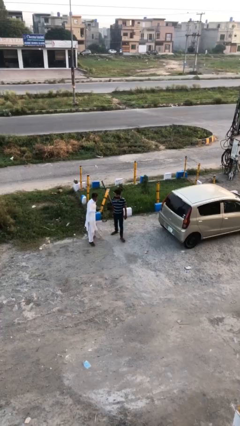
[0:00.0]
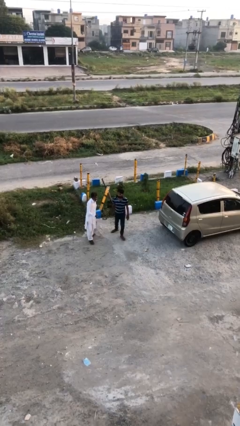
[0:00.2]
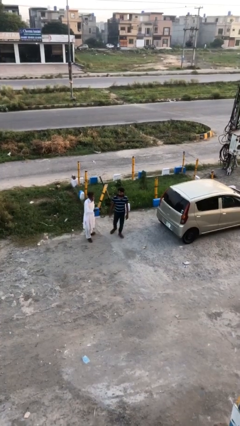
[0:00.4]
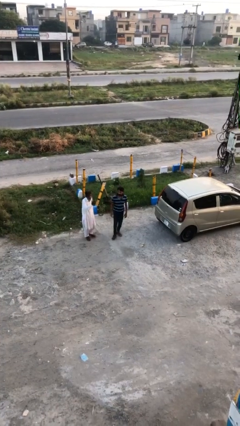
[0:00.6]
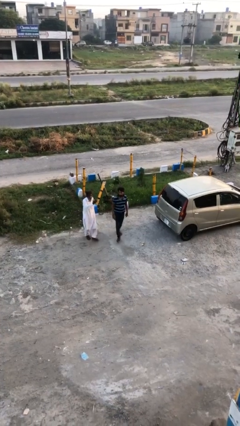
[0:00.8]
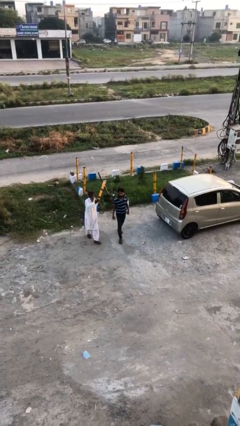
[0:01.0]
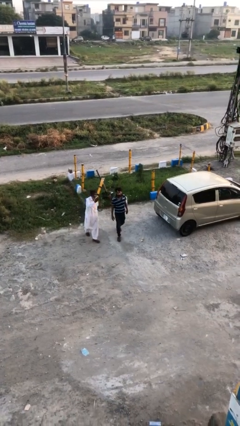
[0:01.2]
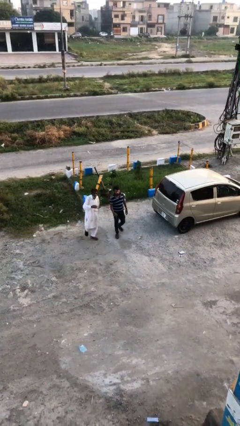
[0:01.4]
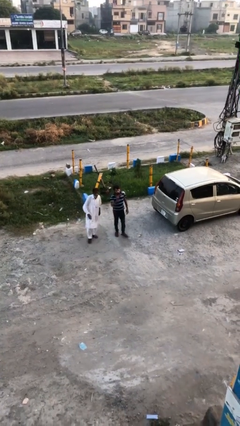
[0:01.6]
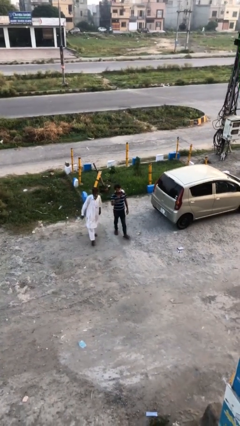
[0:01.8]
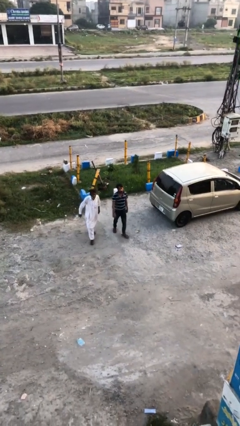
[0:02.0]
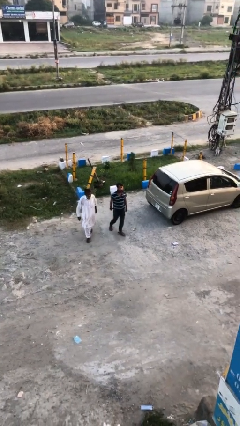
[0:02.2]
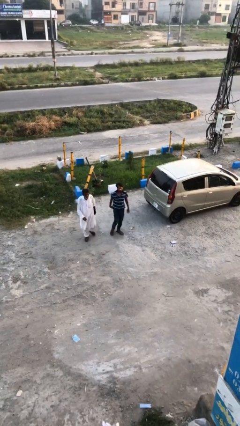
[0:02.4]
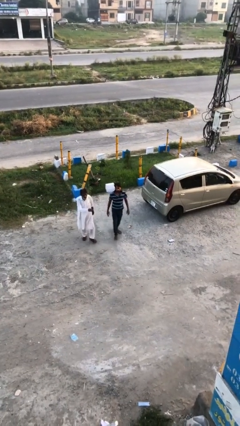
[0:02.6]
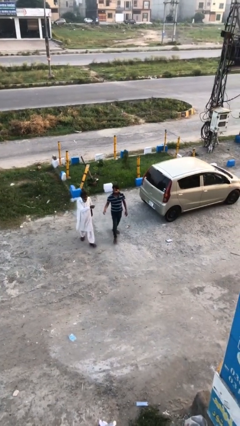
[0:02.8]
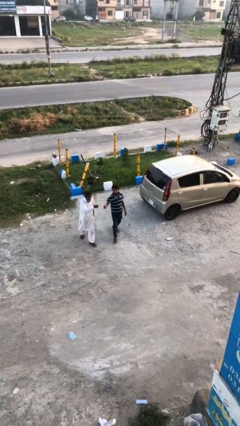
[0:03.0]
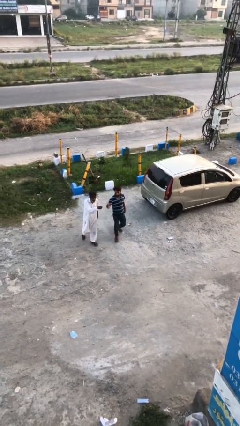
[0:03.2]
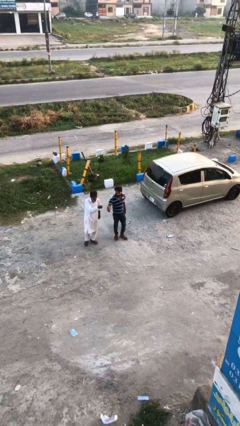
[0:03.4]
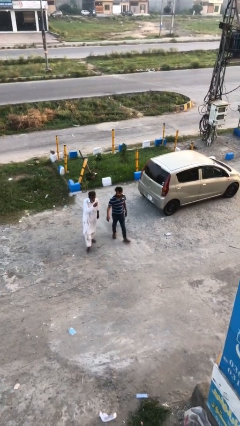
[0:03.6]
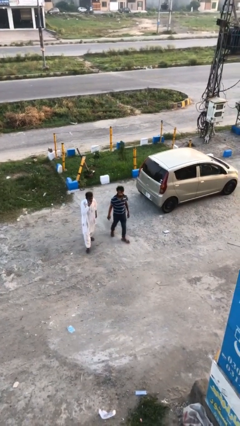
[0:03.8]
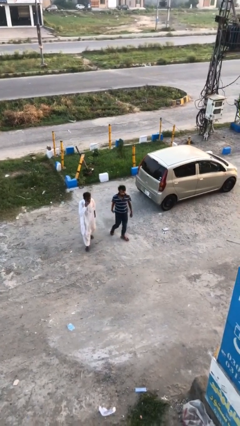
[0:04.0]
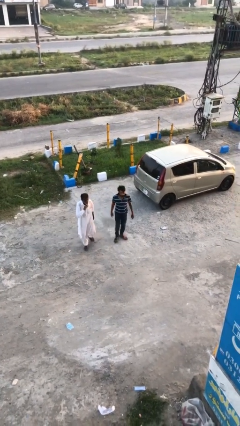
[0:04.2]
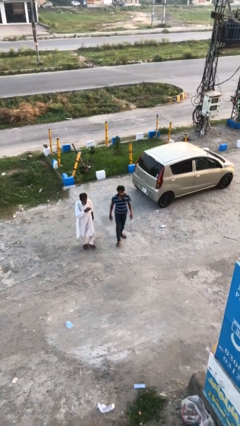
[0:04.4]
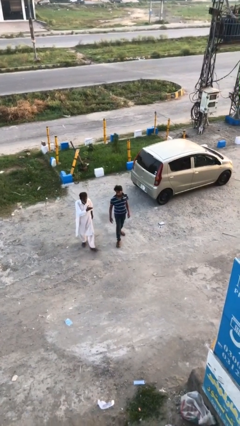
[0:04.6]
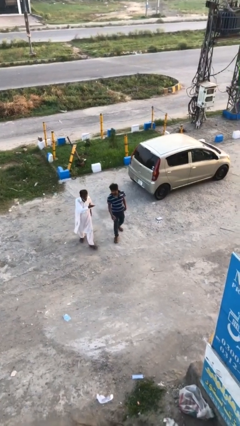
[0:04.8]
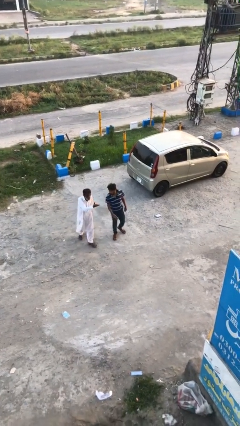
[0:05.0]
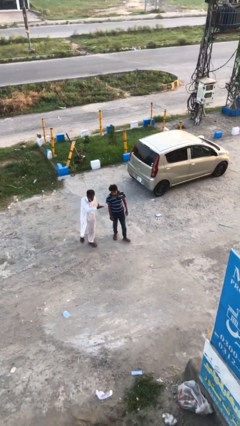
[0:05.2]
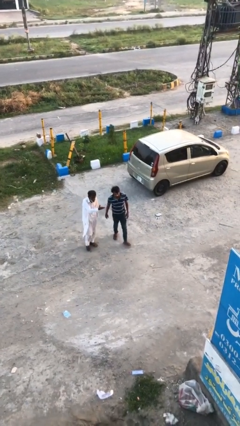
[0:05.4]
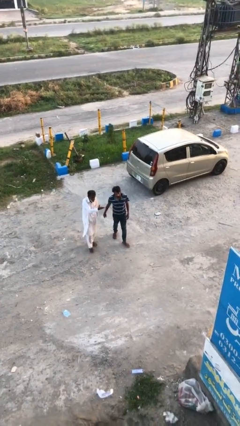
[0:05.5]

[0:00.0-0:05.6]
person talks to person

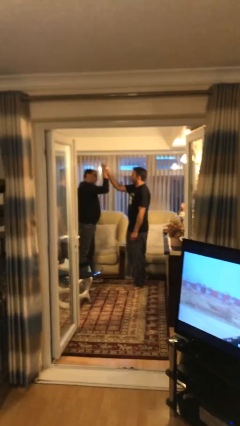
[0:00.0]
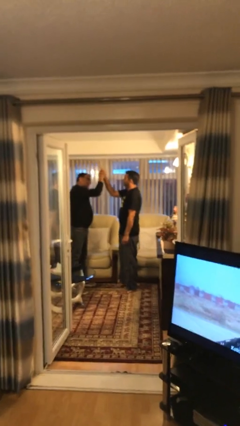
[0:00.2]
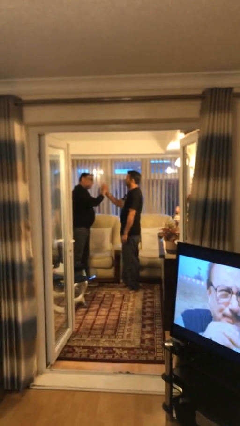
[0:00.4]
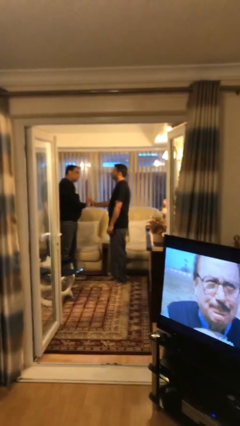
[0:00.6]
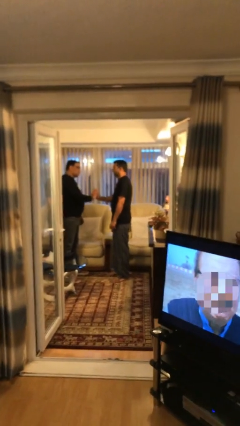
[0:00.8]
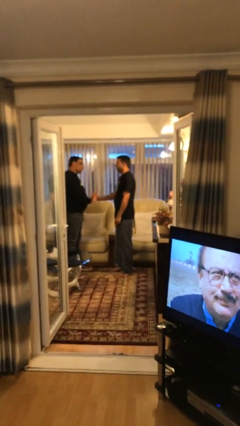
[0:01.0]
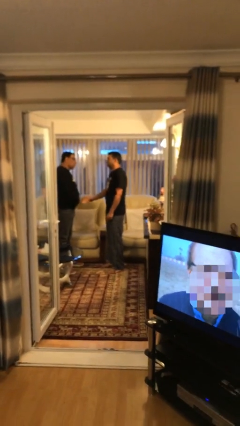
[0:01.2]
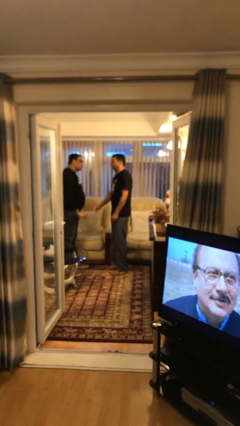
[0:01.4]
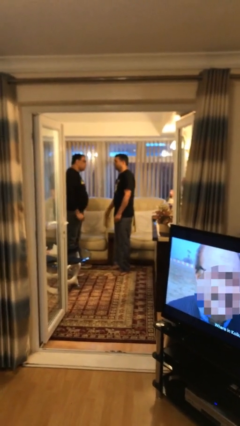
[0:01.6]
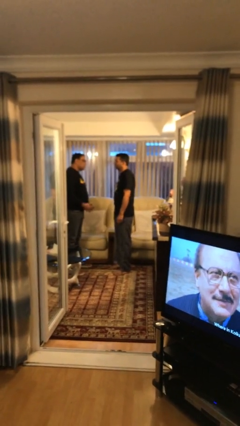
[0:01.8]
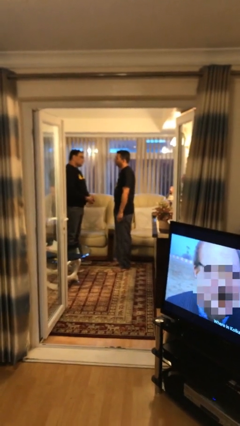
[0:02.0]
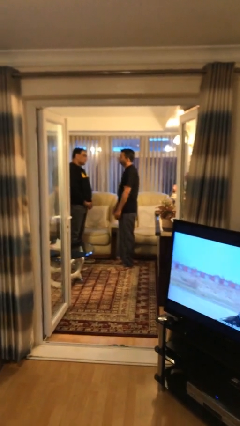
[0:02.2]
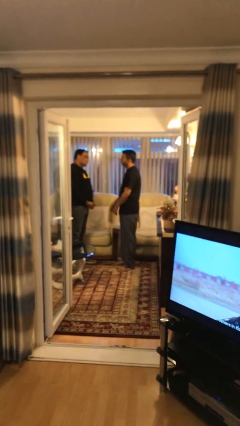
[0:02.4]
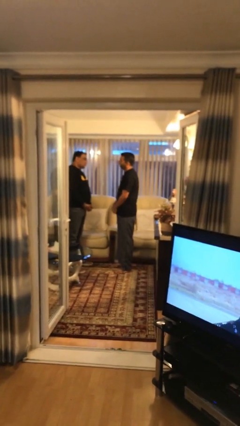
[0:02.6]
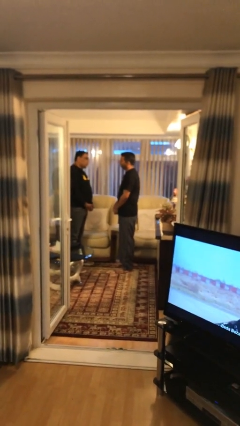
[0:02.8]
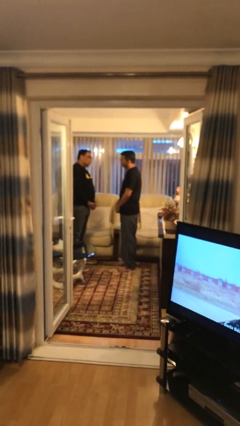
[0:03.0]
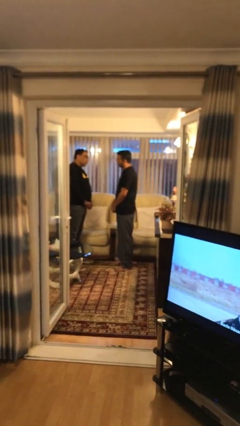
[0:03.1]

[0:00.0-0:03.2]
person highfives hand

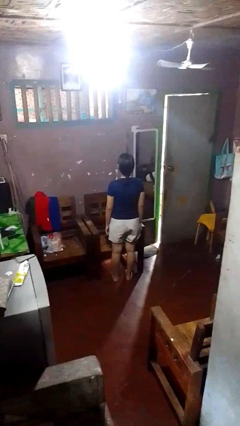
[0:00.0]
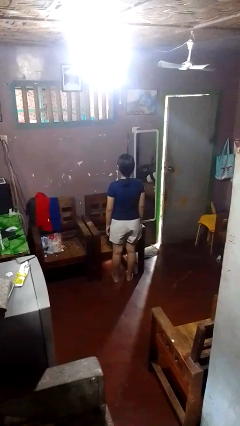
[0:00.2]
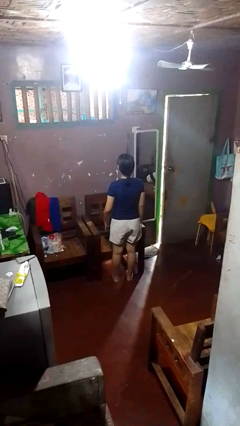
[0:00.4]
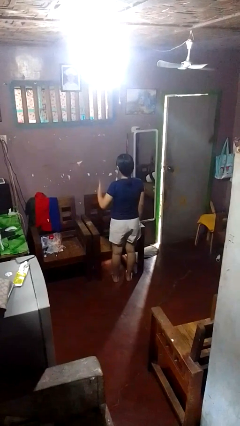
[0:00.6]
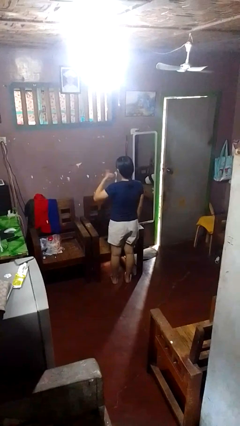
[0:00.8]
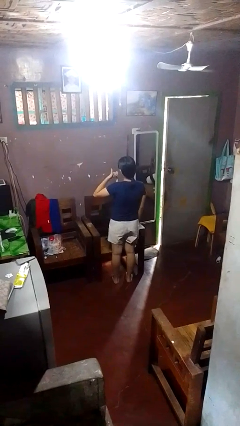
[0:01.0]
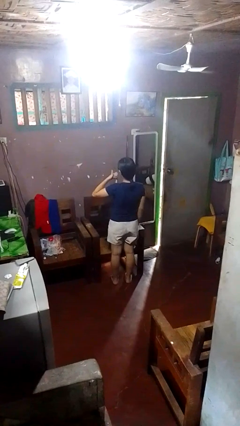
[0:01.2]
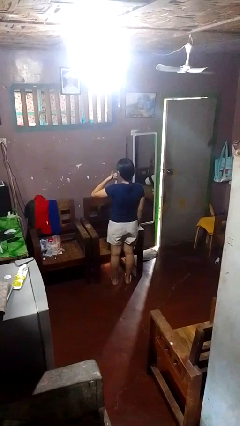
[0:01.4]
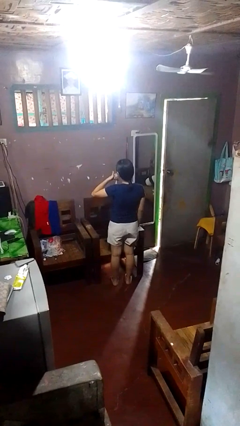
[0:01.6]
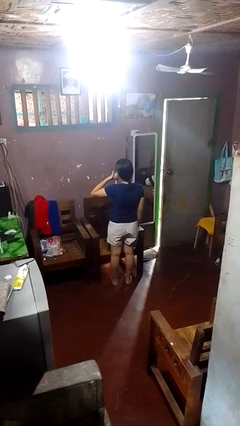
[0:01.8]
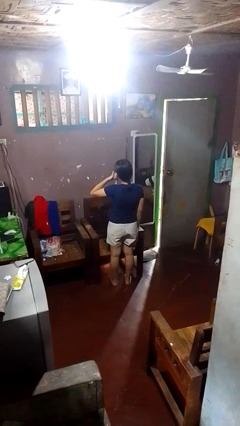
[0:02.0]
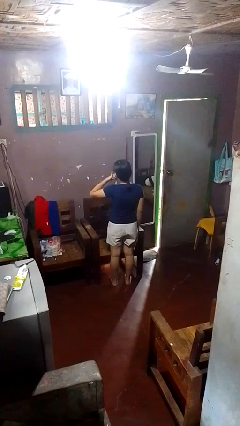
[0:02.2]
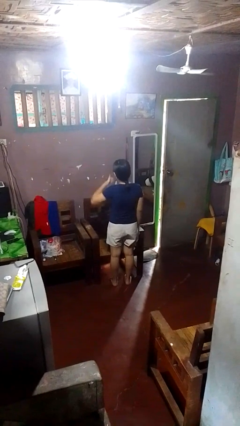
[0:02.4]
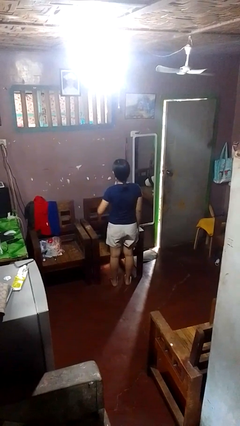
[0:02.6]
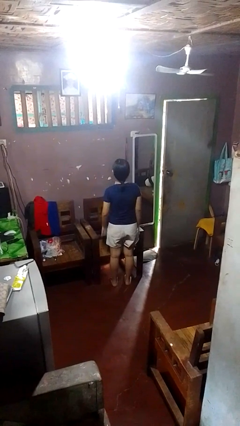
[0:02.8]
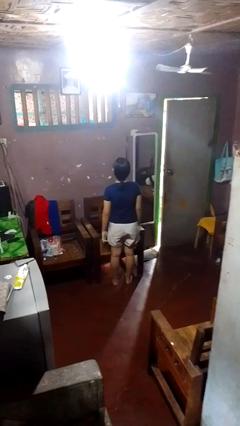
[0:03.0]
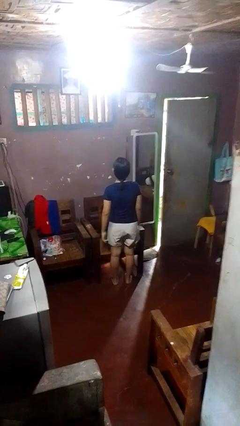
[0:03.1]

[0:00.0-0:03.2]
person gestures call me

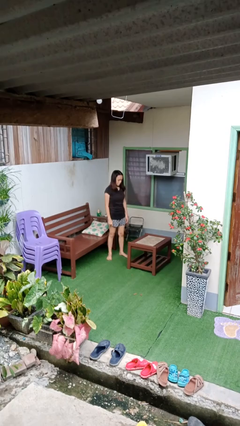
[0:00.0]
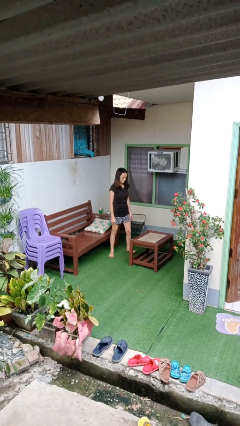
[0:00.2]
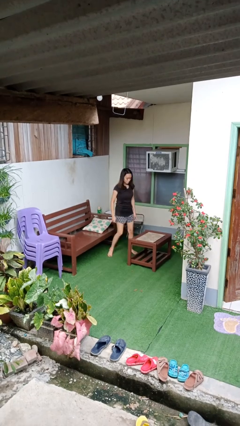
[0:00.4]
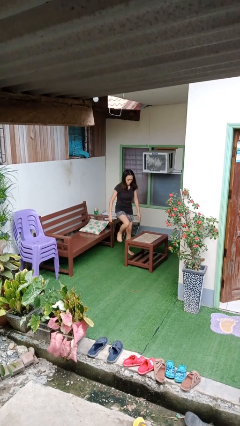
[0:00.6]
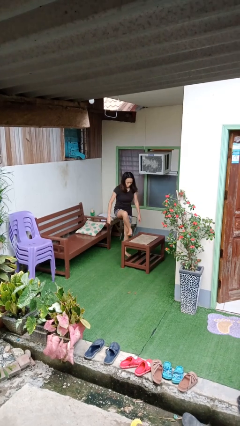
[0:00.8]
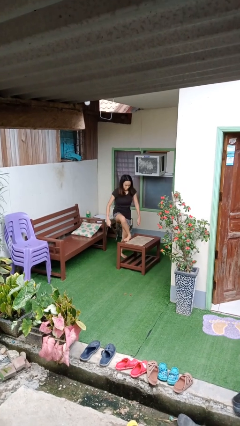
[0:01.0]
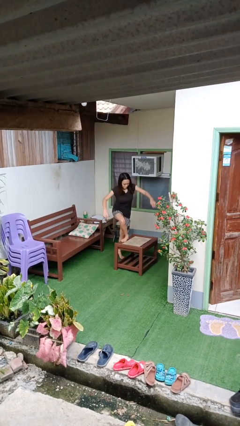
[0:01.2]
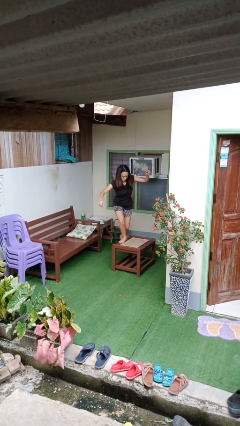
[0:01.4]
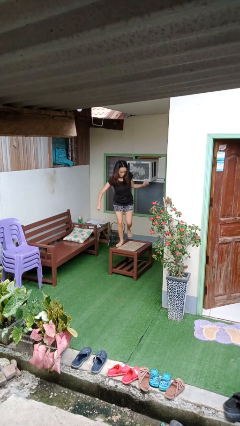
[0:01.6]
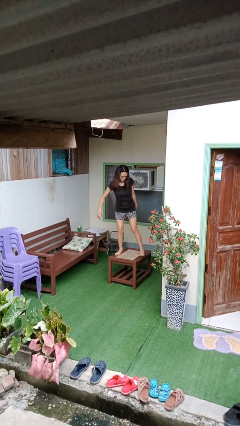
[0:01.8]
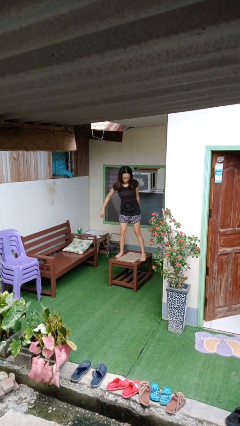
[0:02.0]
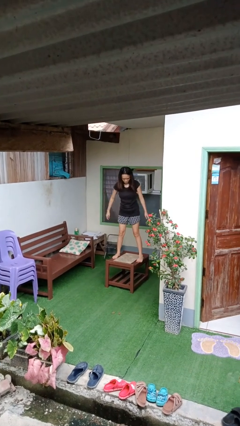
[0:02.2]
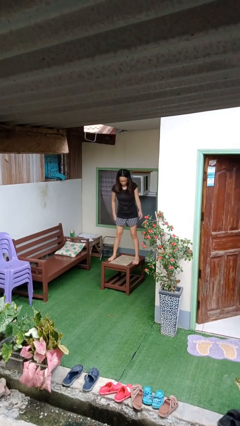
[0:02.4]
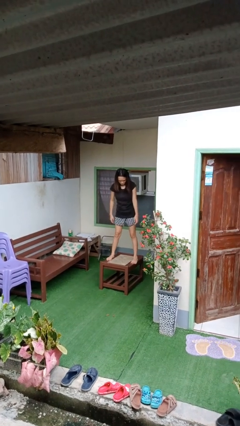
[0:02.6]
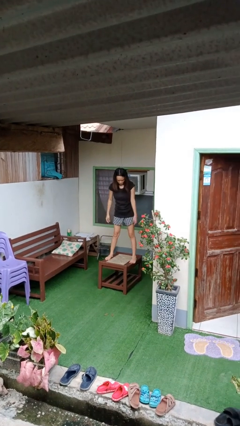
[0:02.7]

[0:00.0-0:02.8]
person climbs on table

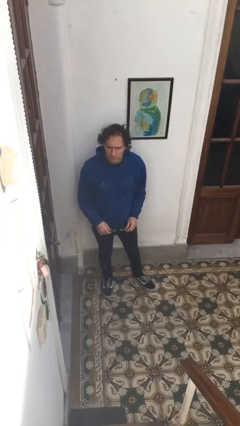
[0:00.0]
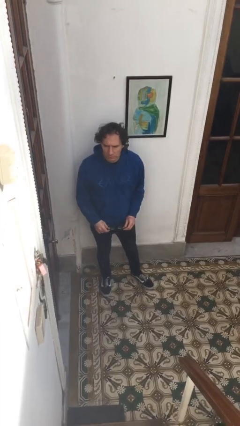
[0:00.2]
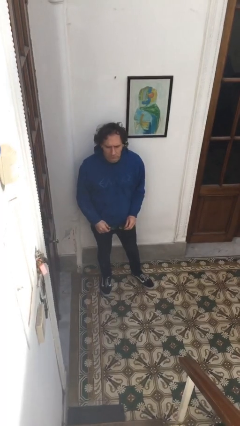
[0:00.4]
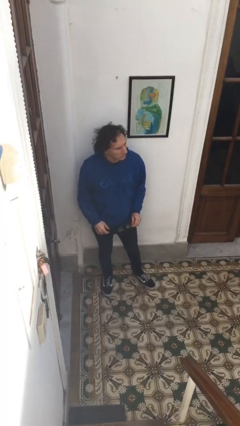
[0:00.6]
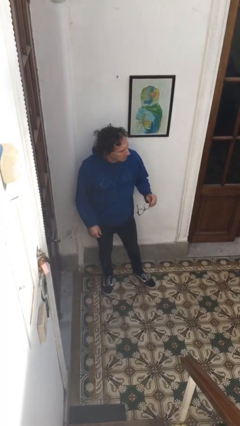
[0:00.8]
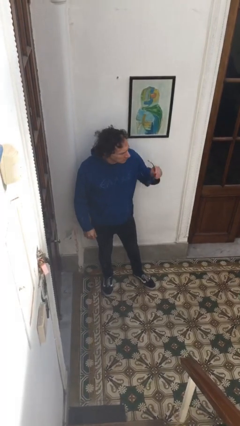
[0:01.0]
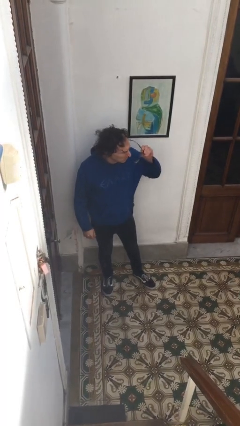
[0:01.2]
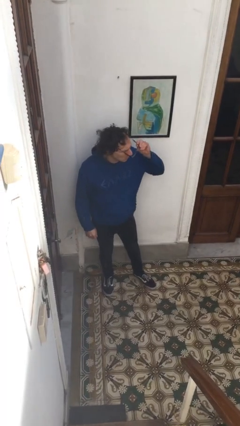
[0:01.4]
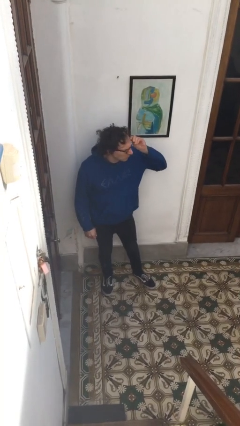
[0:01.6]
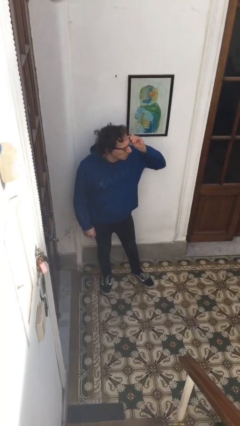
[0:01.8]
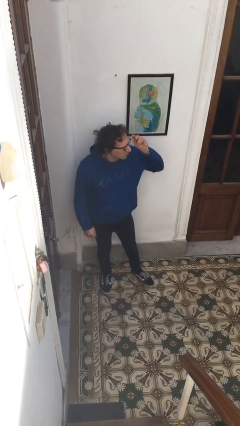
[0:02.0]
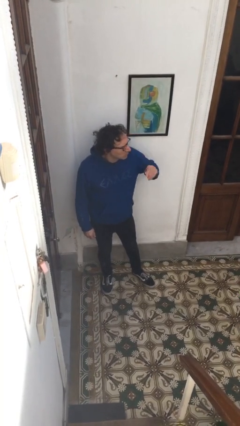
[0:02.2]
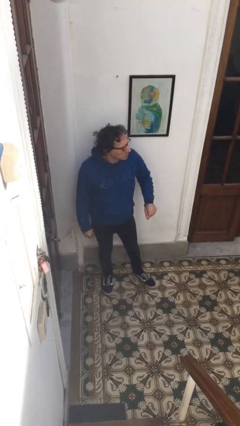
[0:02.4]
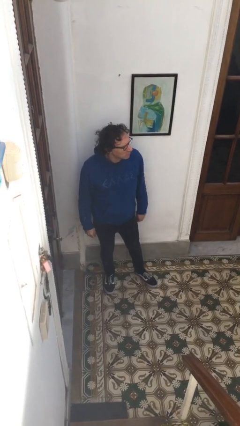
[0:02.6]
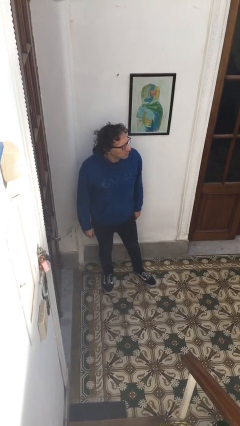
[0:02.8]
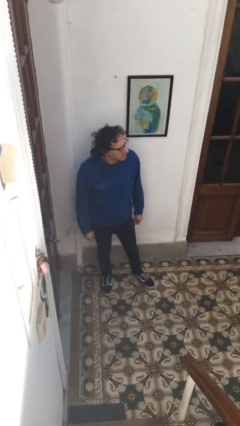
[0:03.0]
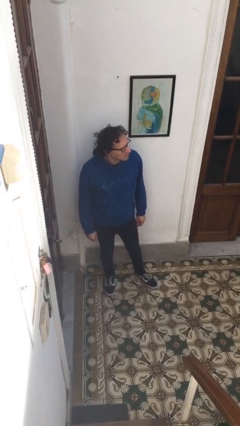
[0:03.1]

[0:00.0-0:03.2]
person puts on glasses
